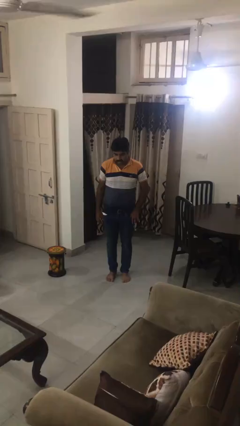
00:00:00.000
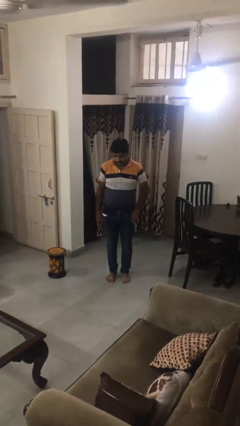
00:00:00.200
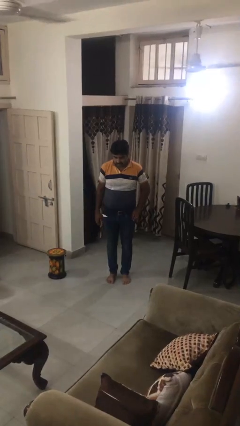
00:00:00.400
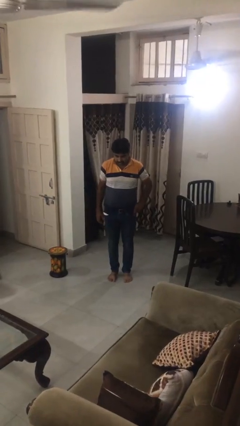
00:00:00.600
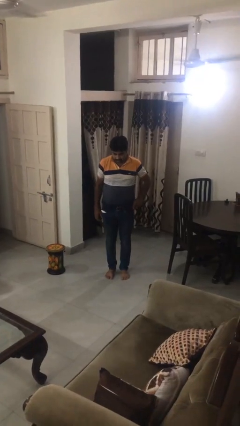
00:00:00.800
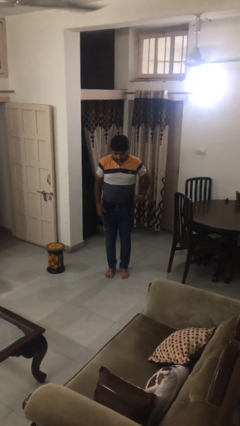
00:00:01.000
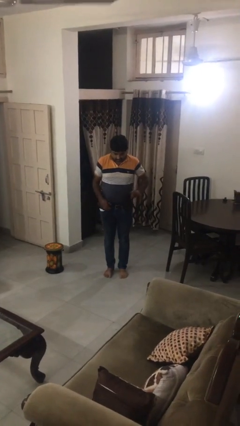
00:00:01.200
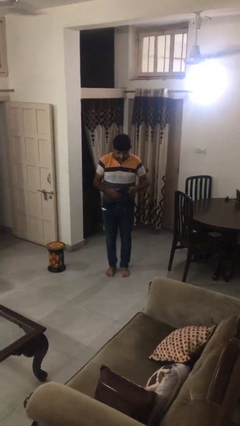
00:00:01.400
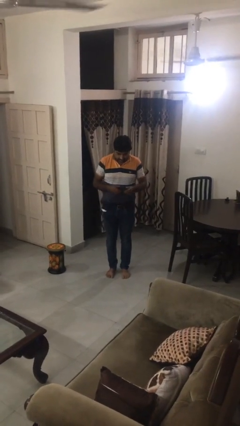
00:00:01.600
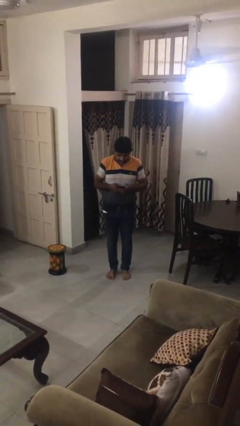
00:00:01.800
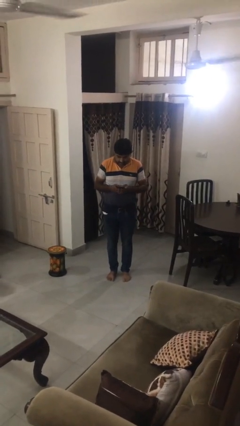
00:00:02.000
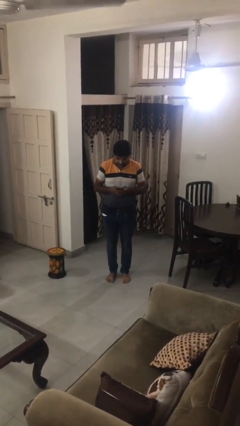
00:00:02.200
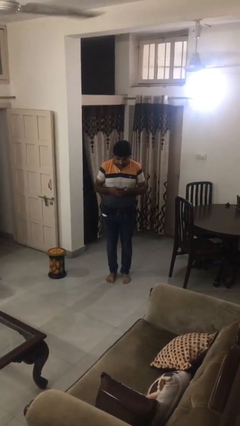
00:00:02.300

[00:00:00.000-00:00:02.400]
person takes phone from pocket

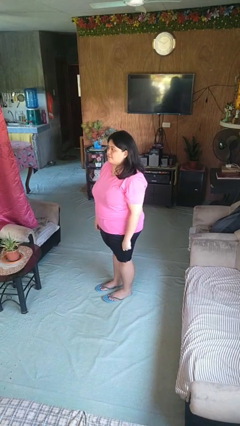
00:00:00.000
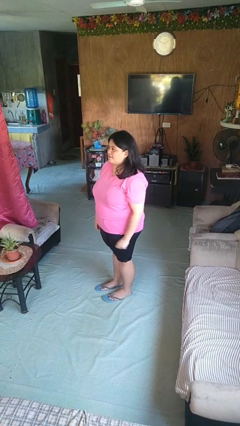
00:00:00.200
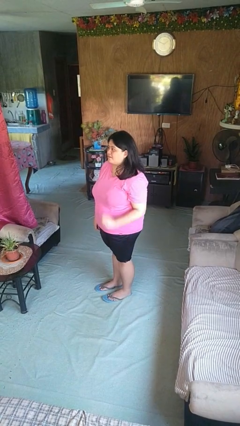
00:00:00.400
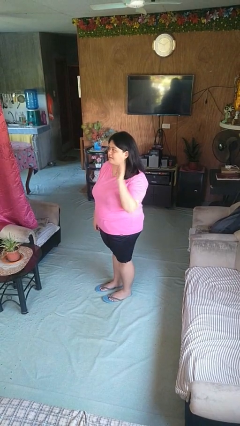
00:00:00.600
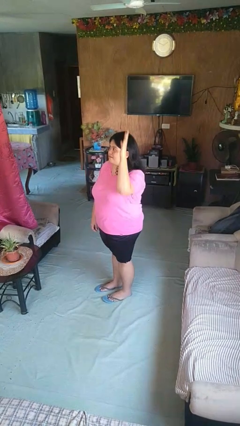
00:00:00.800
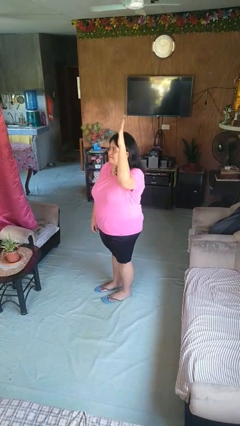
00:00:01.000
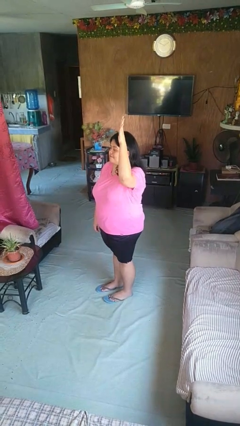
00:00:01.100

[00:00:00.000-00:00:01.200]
person gestures raise hand

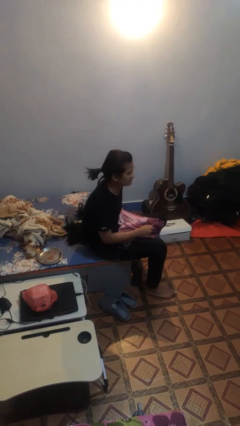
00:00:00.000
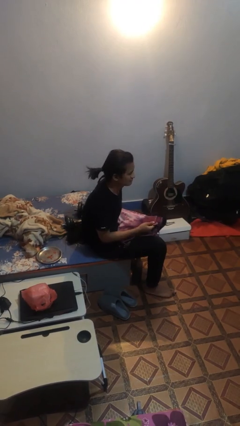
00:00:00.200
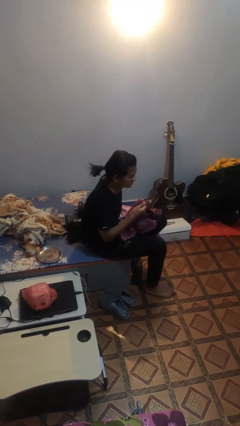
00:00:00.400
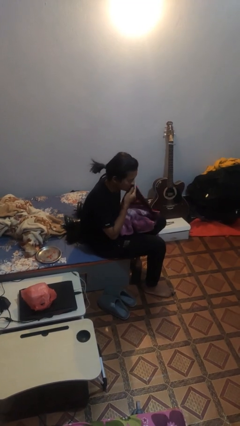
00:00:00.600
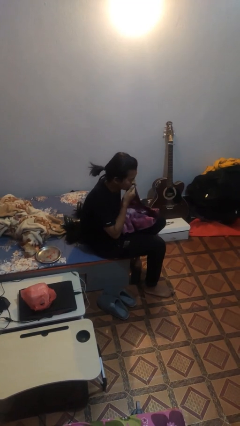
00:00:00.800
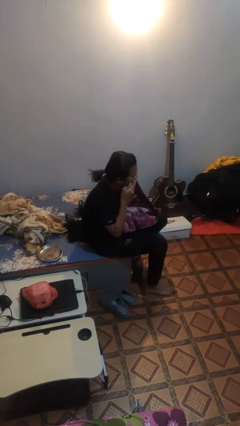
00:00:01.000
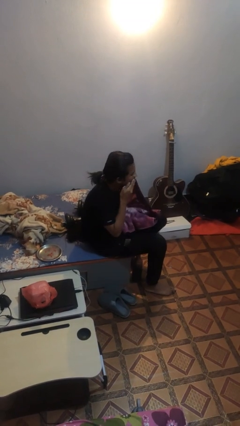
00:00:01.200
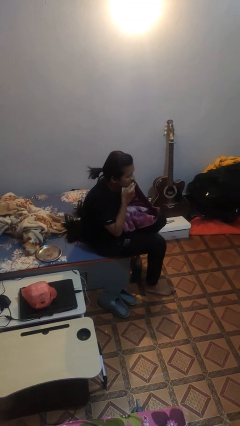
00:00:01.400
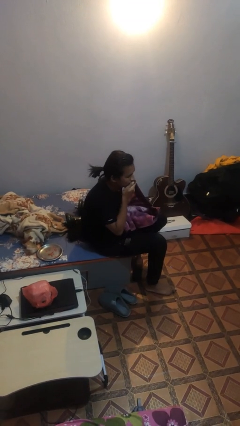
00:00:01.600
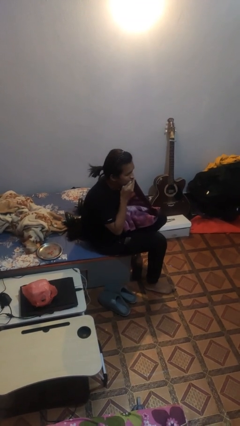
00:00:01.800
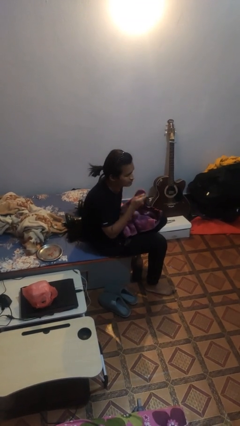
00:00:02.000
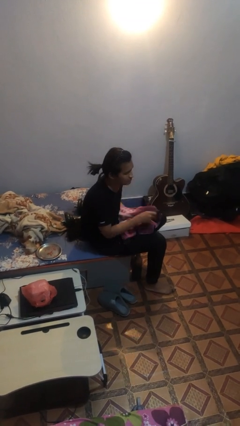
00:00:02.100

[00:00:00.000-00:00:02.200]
person wipes mouth with napkin

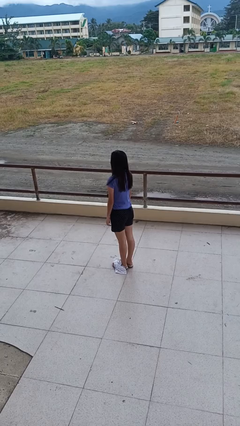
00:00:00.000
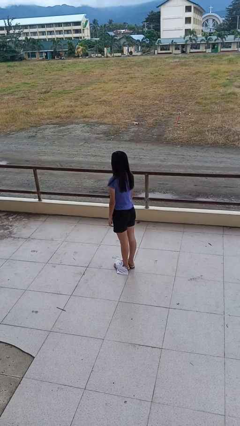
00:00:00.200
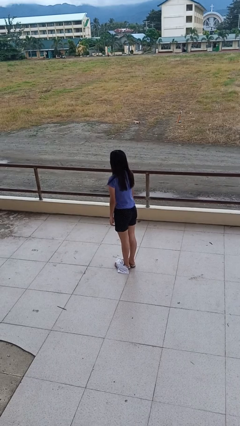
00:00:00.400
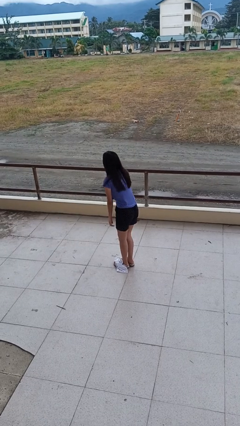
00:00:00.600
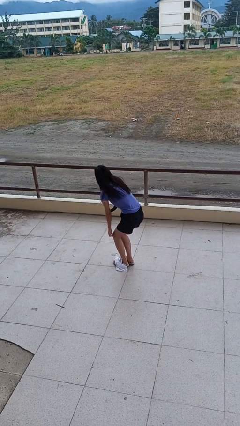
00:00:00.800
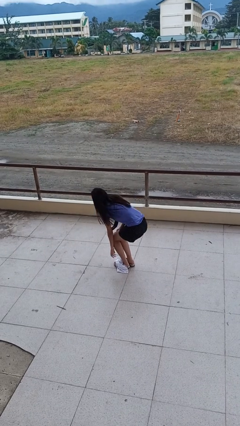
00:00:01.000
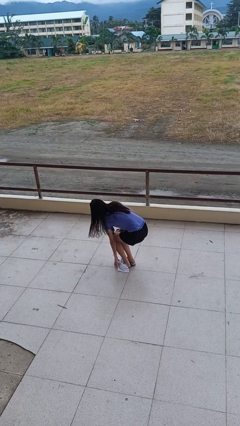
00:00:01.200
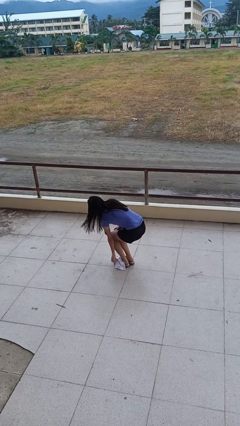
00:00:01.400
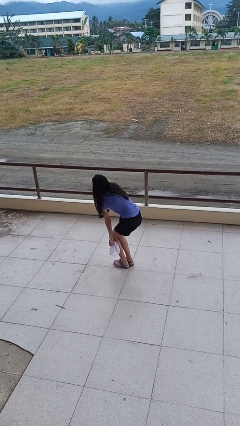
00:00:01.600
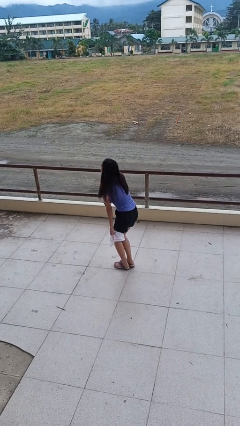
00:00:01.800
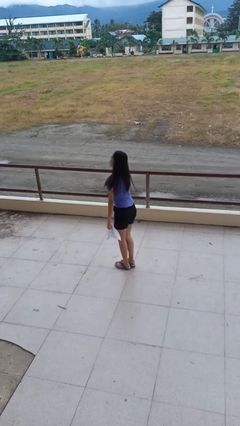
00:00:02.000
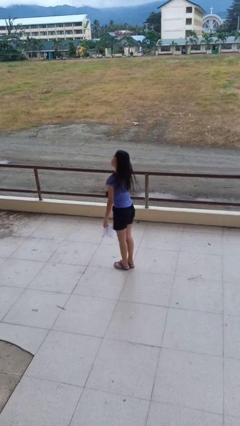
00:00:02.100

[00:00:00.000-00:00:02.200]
person picks up object from floor

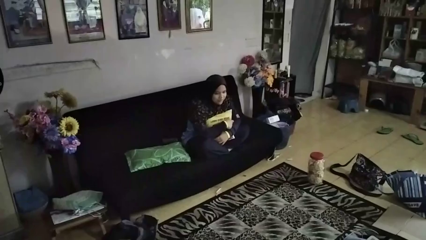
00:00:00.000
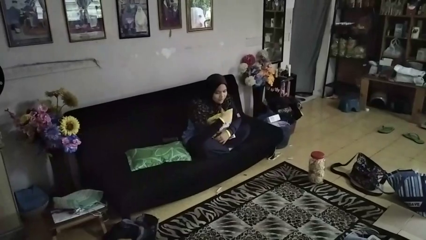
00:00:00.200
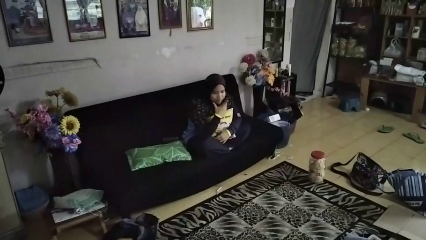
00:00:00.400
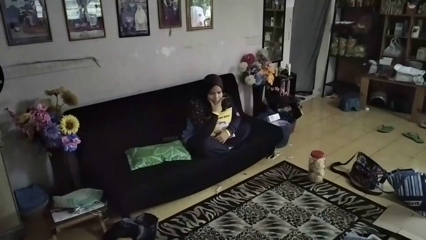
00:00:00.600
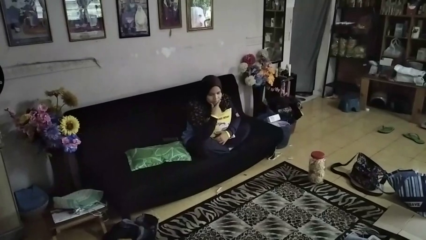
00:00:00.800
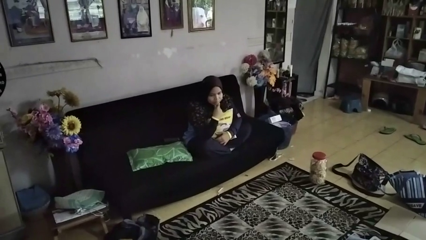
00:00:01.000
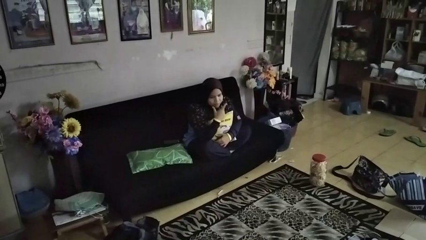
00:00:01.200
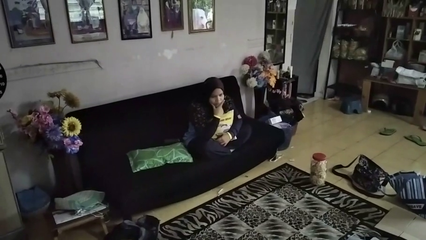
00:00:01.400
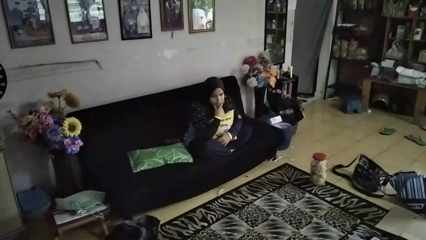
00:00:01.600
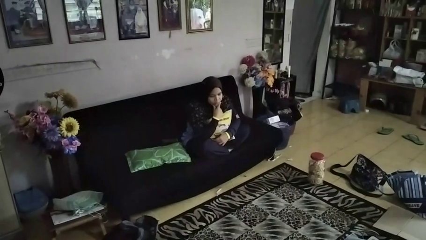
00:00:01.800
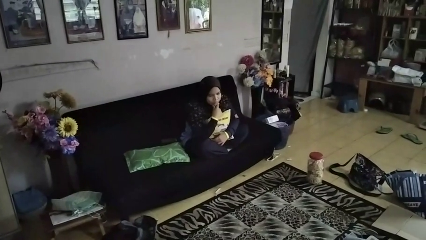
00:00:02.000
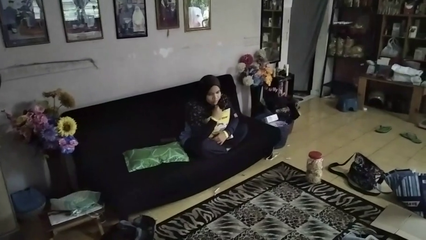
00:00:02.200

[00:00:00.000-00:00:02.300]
person strokes chin

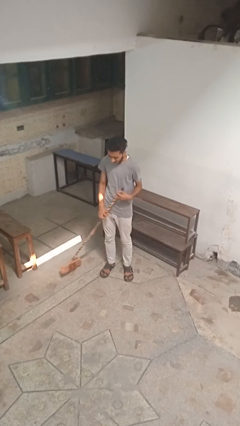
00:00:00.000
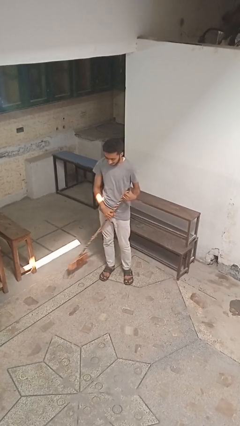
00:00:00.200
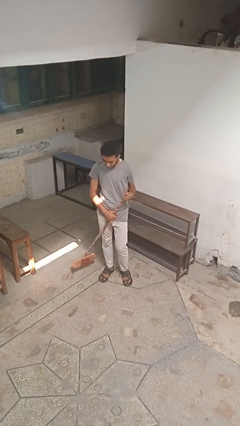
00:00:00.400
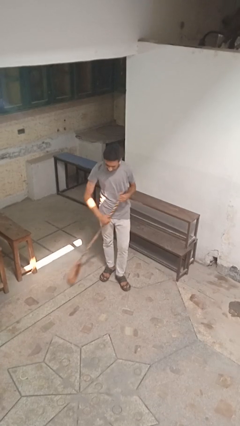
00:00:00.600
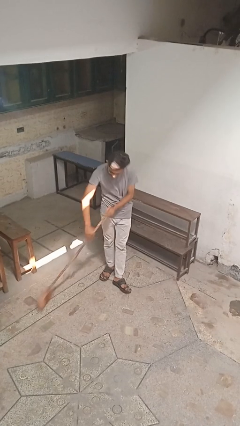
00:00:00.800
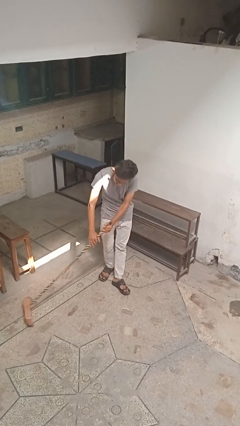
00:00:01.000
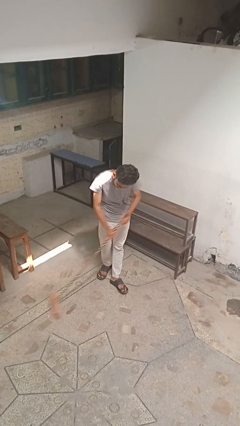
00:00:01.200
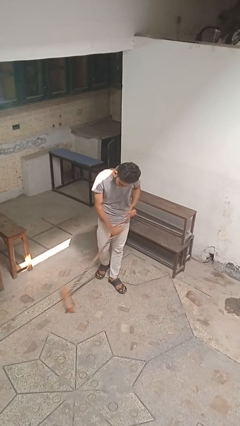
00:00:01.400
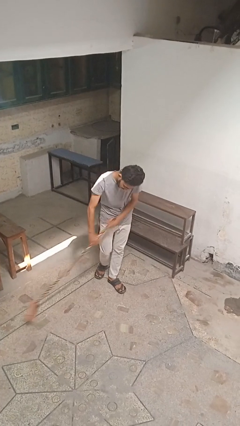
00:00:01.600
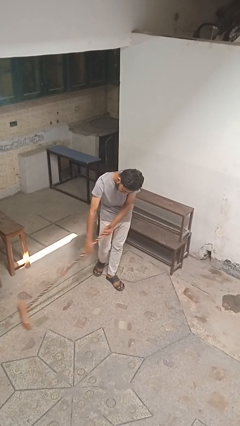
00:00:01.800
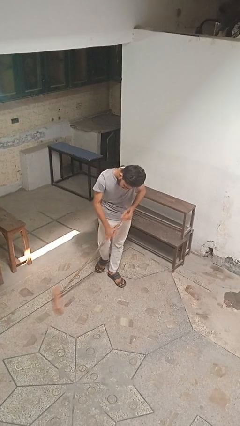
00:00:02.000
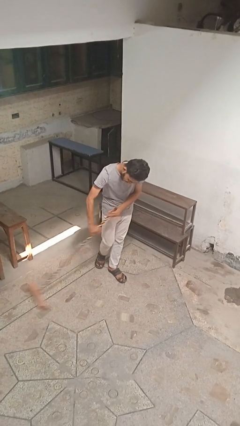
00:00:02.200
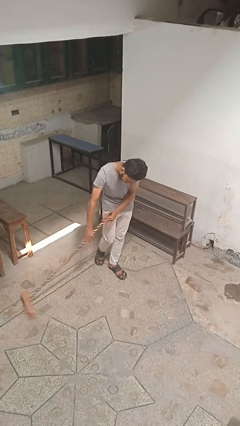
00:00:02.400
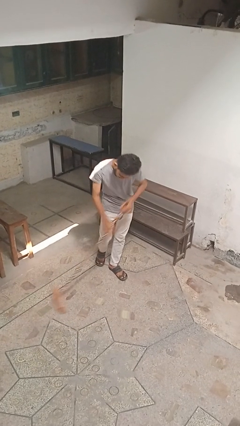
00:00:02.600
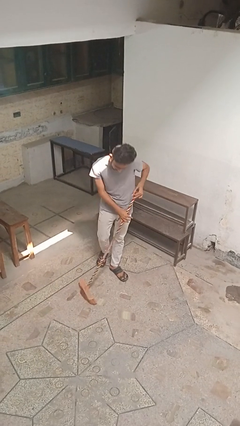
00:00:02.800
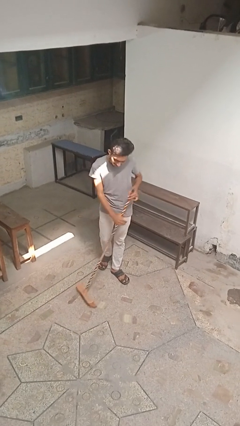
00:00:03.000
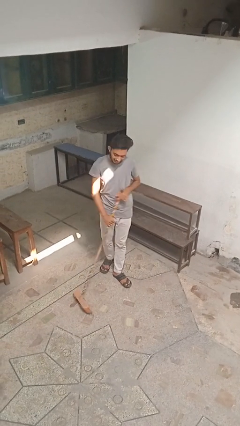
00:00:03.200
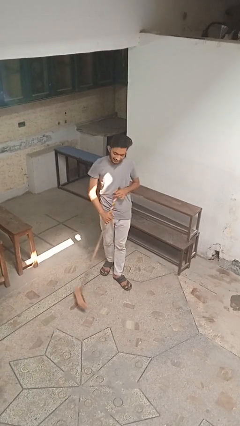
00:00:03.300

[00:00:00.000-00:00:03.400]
person sweeps floor

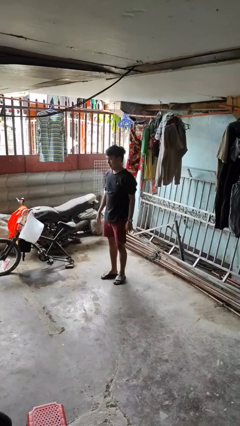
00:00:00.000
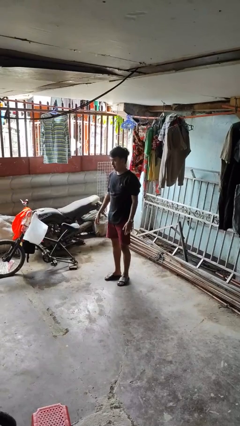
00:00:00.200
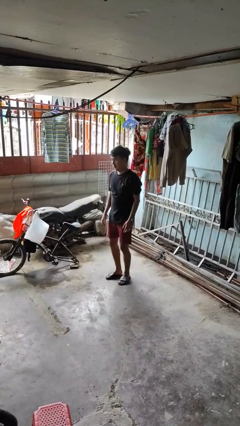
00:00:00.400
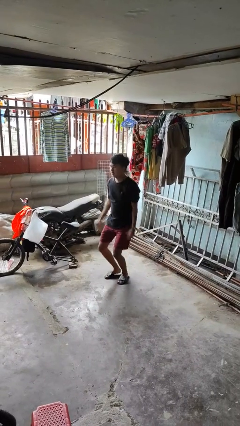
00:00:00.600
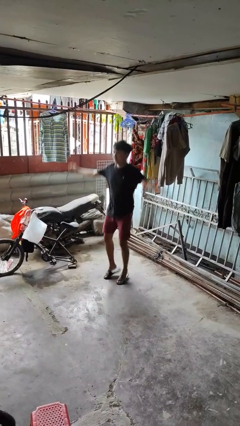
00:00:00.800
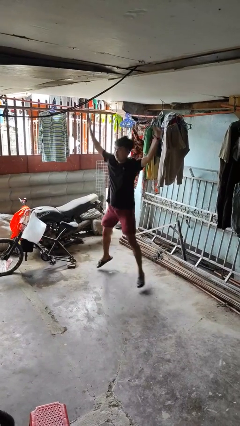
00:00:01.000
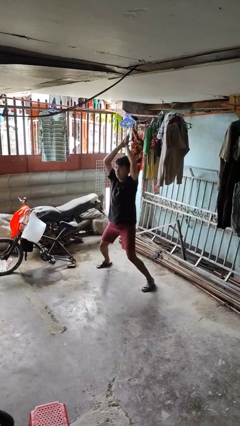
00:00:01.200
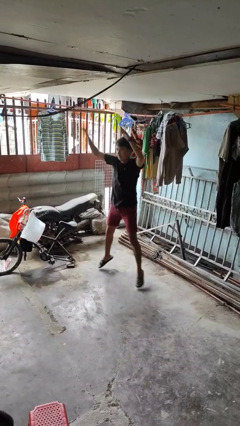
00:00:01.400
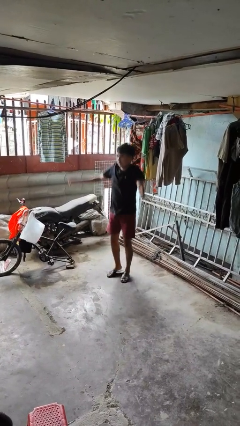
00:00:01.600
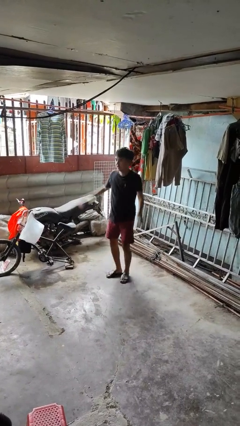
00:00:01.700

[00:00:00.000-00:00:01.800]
person exercises with jumping jacks

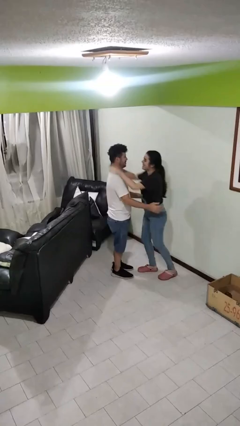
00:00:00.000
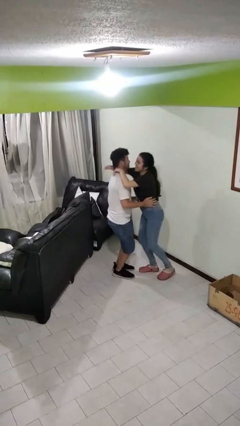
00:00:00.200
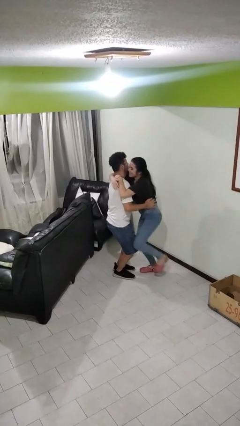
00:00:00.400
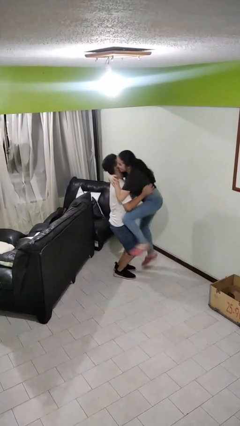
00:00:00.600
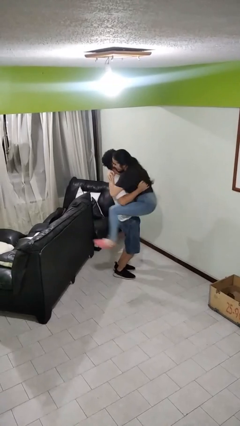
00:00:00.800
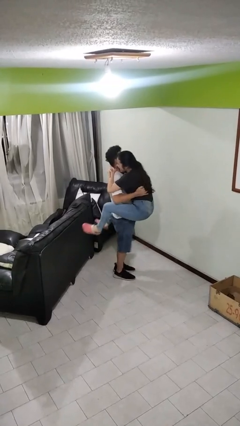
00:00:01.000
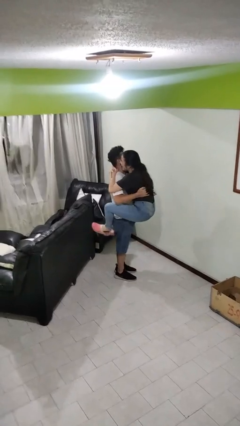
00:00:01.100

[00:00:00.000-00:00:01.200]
person picks up person

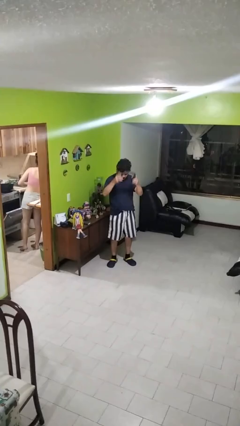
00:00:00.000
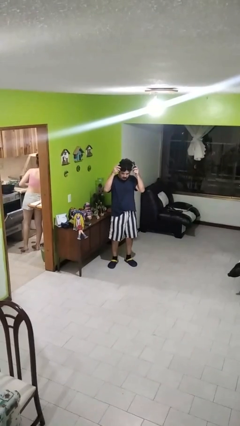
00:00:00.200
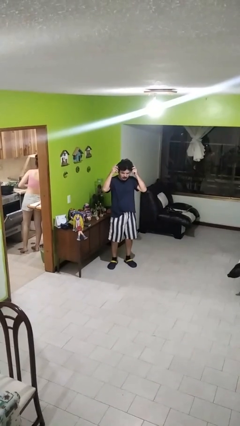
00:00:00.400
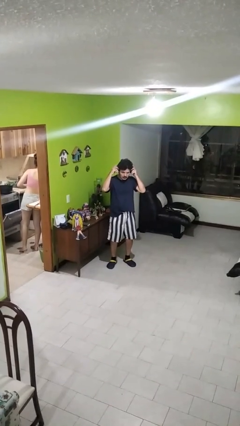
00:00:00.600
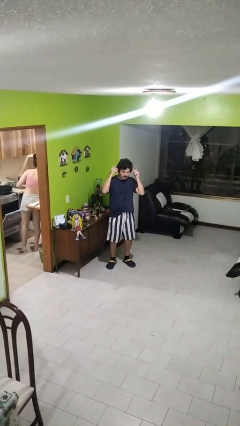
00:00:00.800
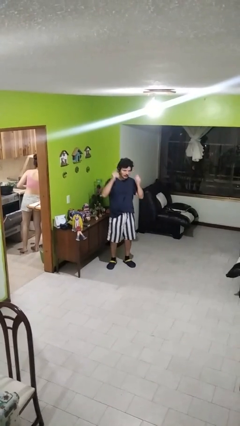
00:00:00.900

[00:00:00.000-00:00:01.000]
person puts on headphones
